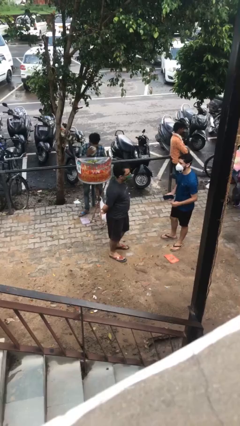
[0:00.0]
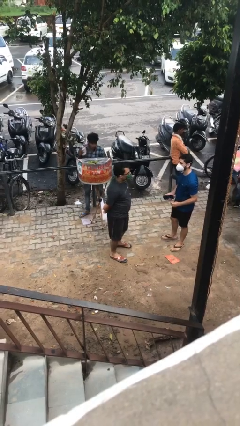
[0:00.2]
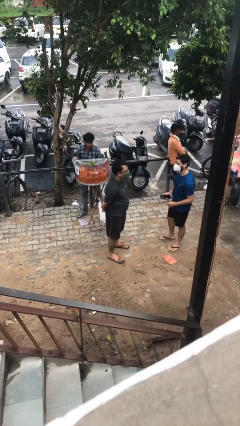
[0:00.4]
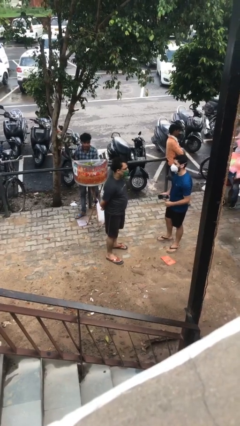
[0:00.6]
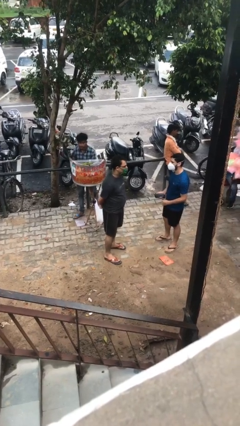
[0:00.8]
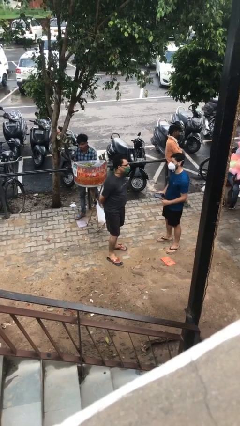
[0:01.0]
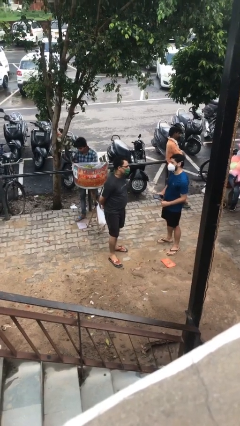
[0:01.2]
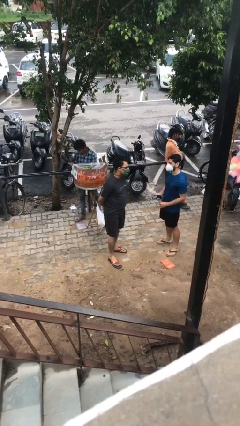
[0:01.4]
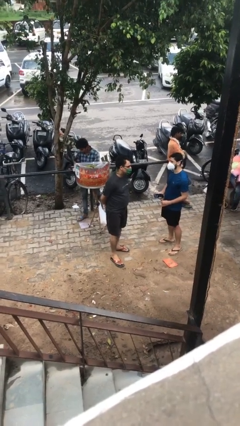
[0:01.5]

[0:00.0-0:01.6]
person talks to person

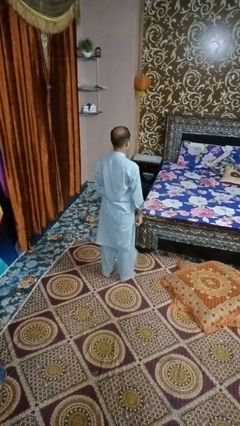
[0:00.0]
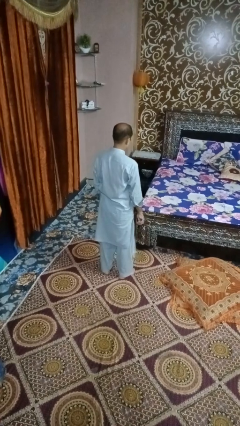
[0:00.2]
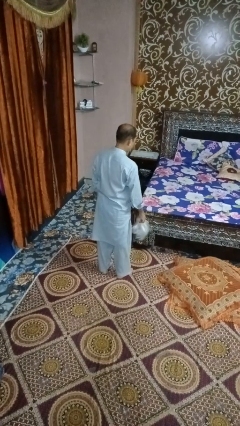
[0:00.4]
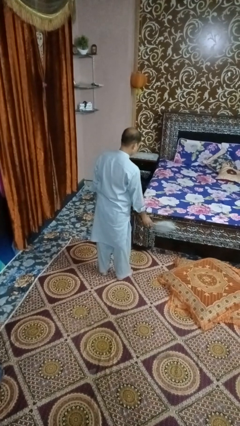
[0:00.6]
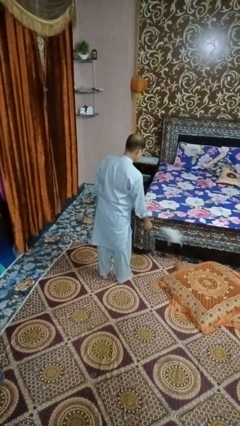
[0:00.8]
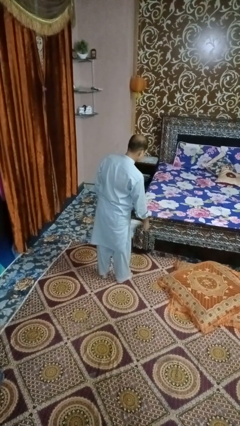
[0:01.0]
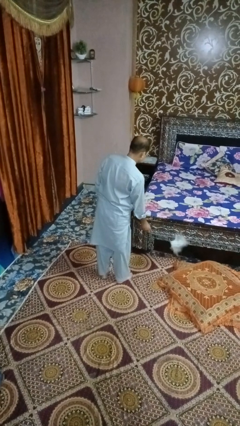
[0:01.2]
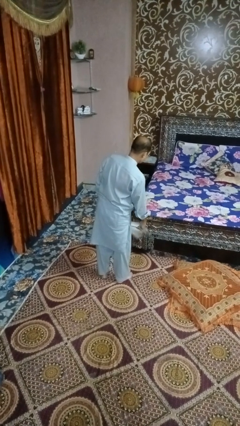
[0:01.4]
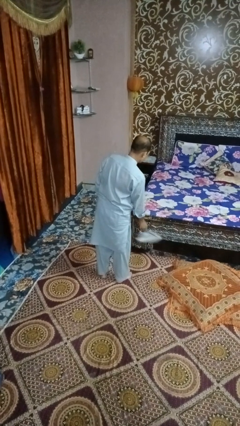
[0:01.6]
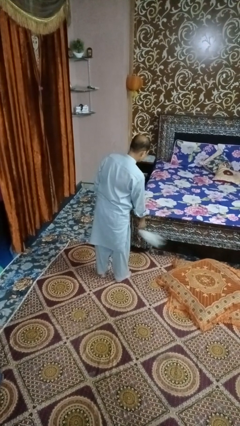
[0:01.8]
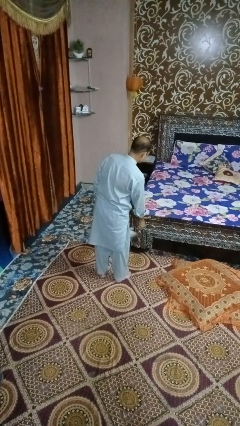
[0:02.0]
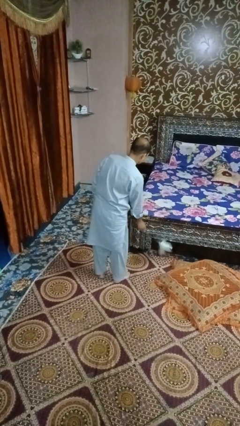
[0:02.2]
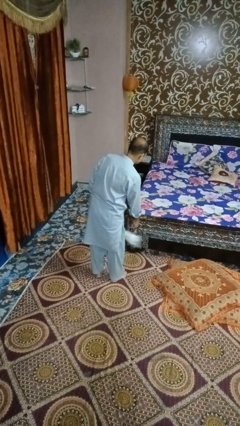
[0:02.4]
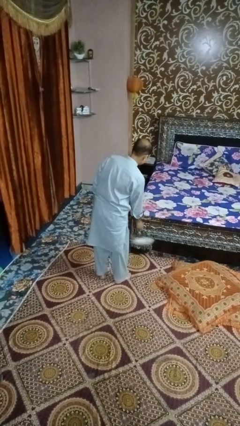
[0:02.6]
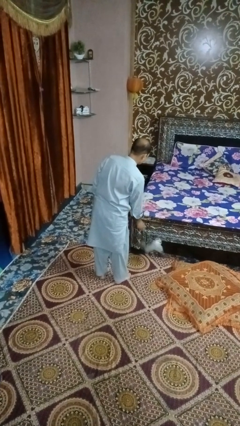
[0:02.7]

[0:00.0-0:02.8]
person dusts furniture

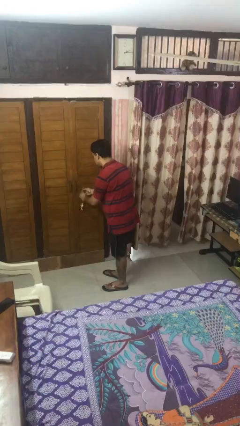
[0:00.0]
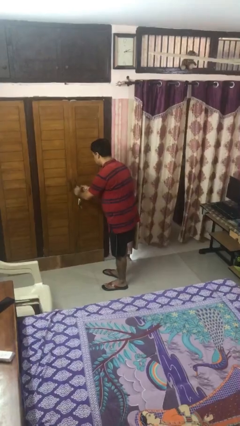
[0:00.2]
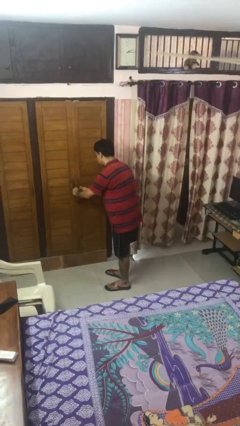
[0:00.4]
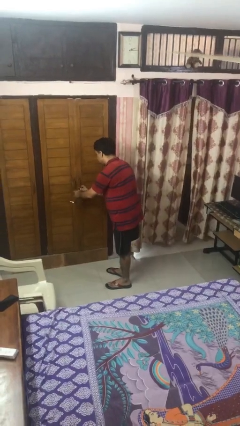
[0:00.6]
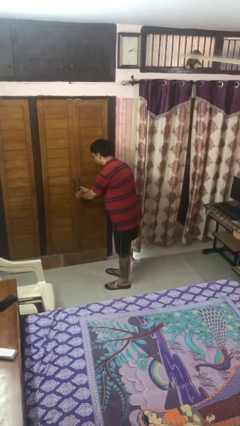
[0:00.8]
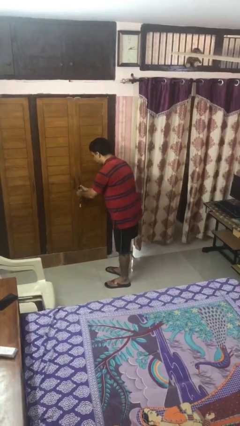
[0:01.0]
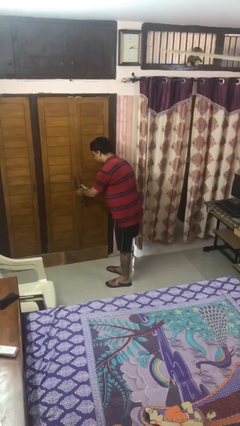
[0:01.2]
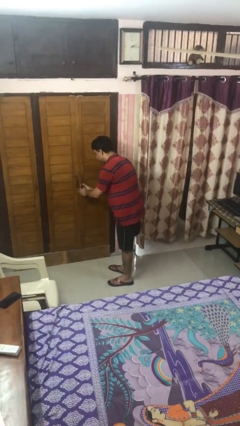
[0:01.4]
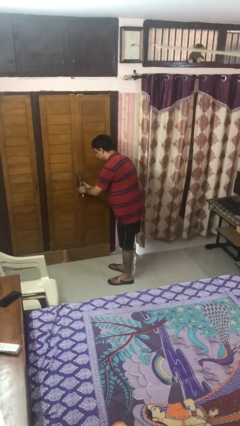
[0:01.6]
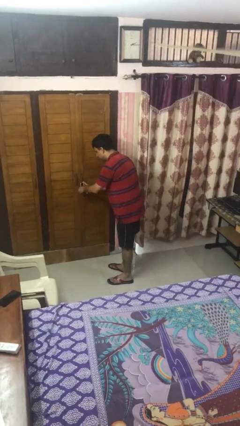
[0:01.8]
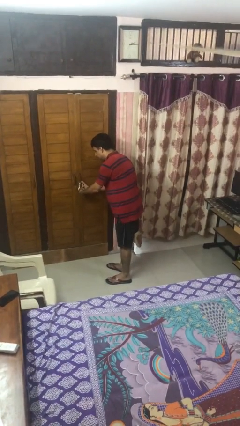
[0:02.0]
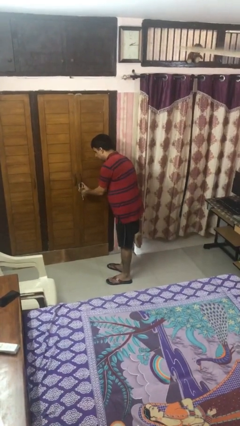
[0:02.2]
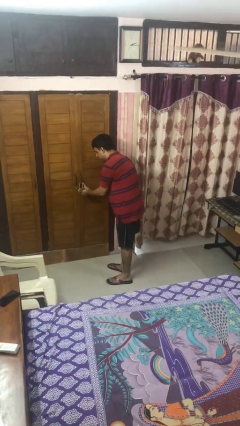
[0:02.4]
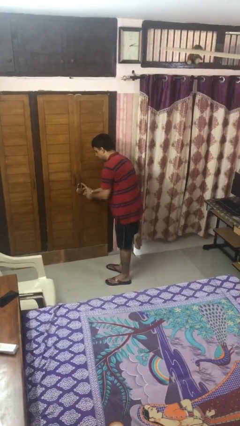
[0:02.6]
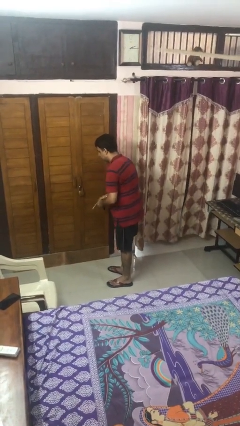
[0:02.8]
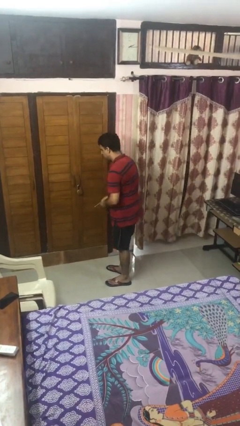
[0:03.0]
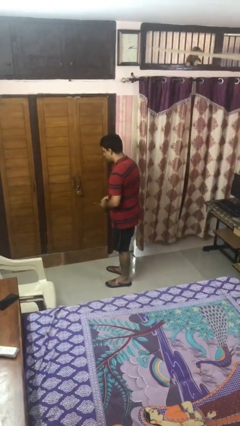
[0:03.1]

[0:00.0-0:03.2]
person locks door with keys

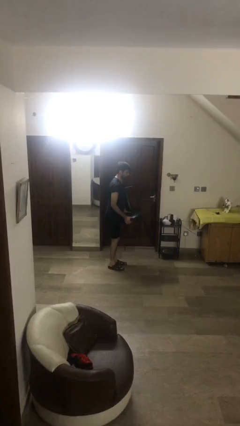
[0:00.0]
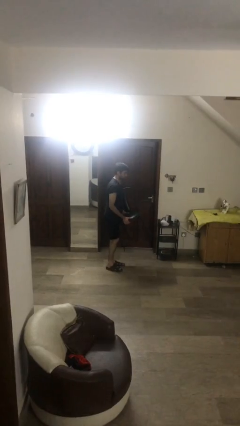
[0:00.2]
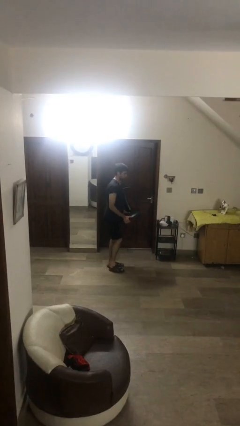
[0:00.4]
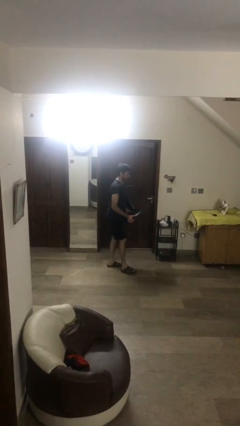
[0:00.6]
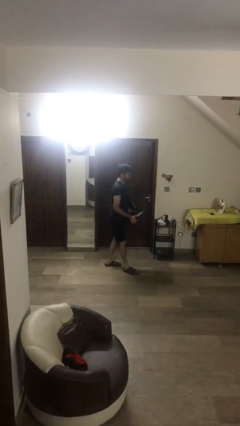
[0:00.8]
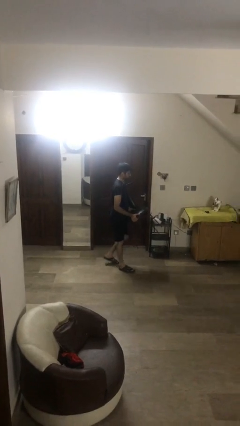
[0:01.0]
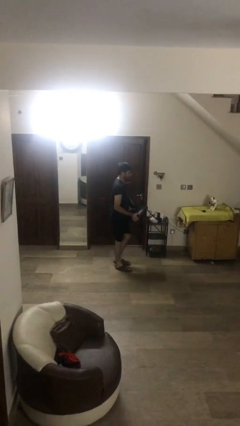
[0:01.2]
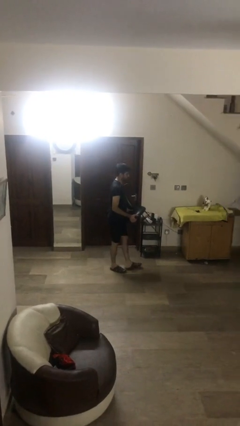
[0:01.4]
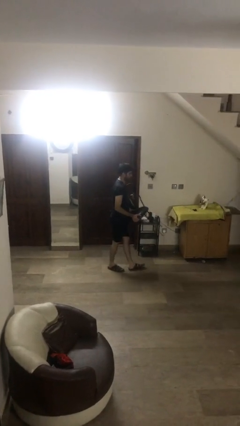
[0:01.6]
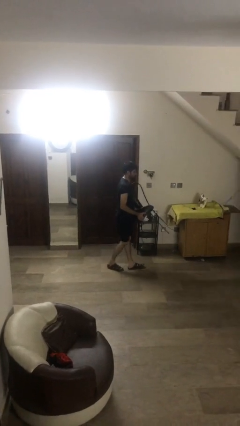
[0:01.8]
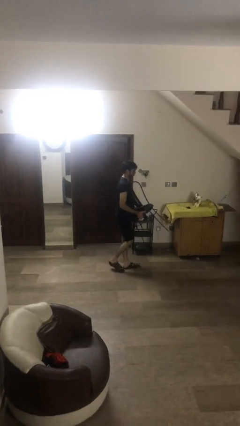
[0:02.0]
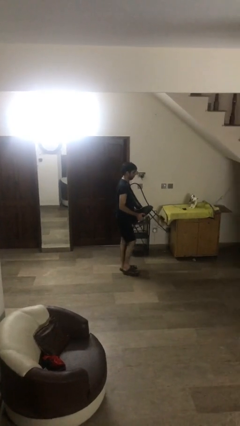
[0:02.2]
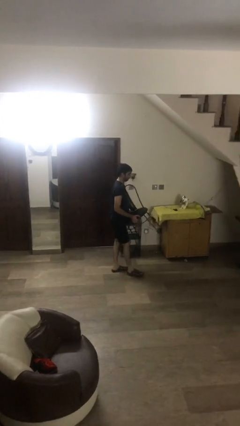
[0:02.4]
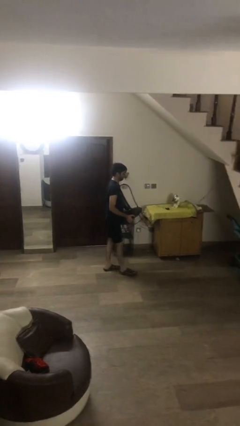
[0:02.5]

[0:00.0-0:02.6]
person carries heavy object

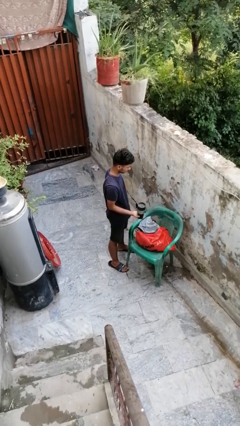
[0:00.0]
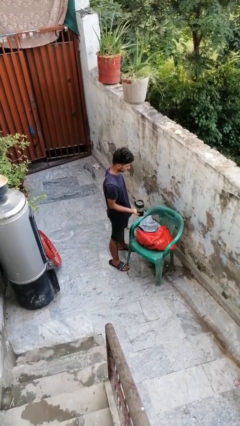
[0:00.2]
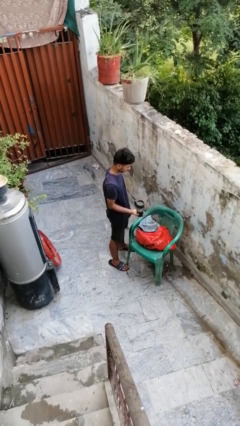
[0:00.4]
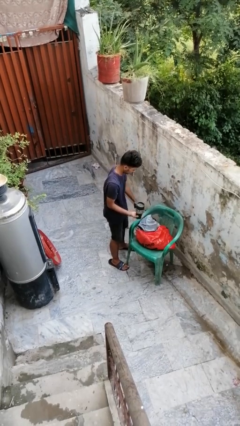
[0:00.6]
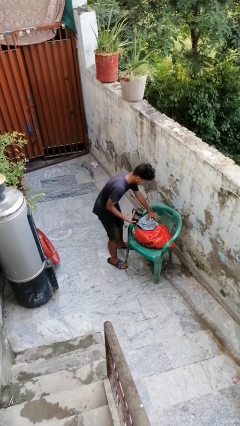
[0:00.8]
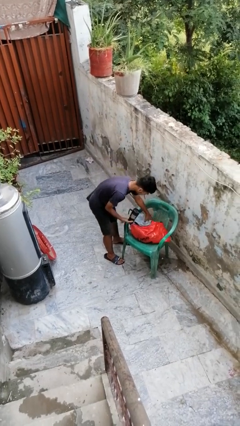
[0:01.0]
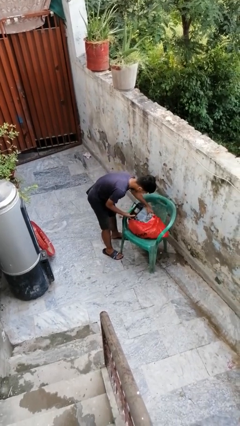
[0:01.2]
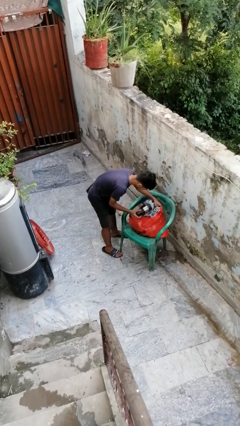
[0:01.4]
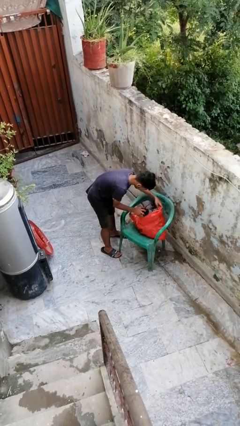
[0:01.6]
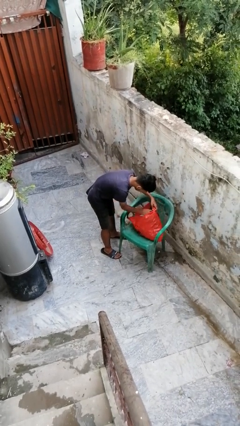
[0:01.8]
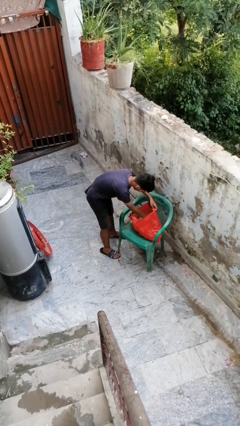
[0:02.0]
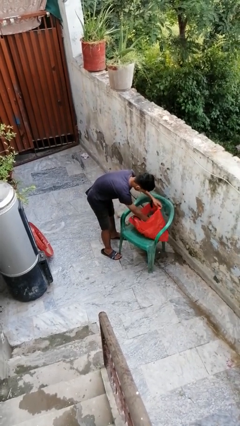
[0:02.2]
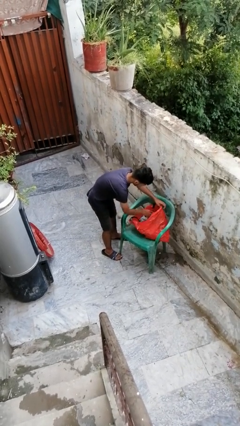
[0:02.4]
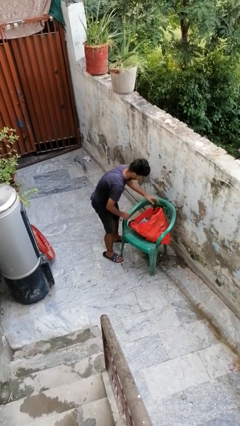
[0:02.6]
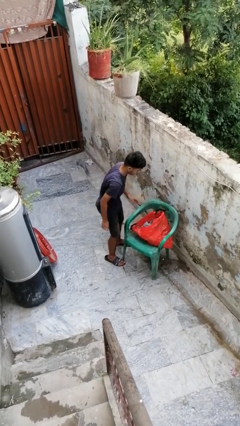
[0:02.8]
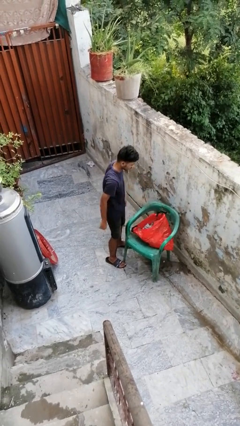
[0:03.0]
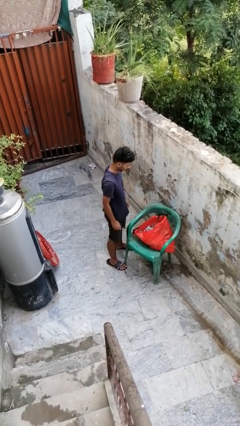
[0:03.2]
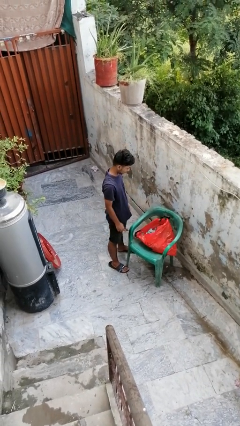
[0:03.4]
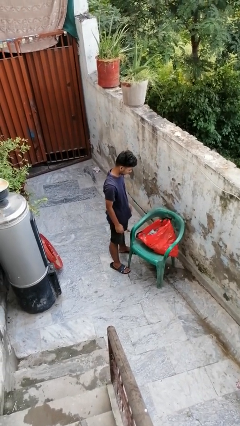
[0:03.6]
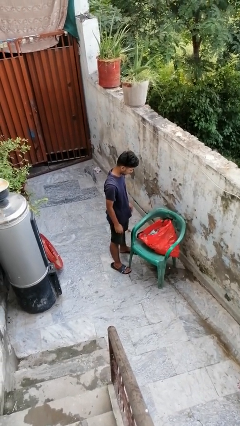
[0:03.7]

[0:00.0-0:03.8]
person puts object into bag

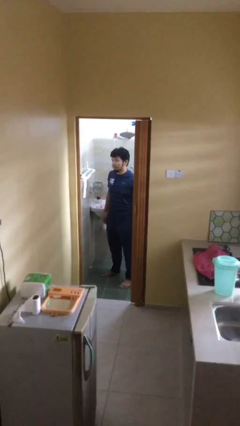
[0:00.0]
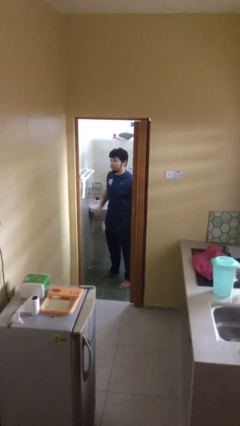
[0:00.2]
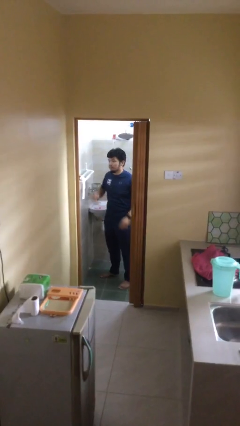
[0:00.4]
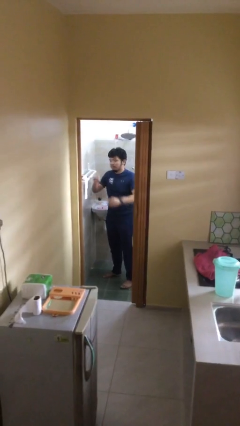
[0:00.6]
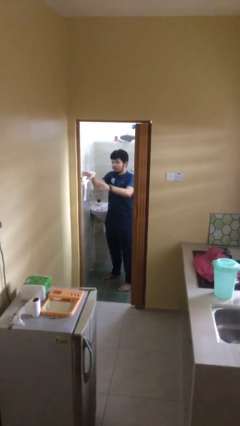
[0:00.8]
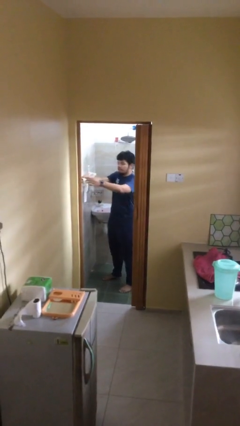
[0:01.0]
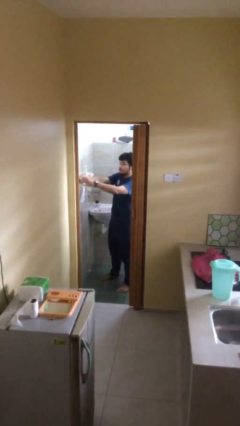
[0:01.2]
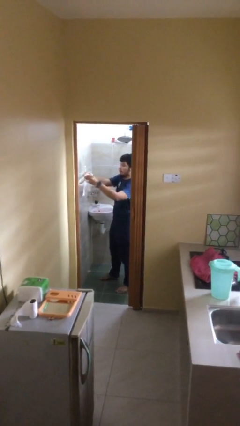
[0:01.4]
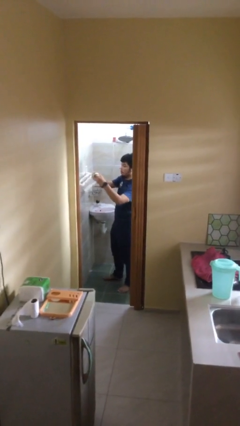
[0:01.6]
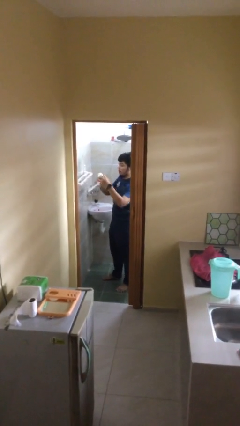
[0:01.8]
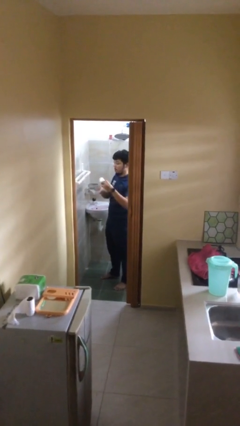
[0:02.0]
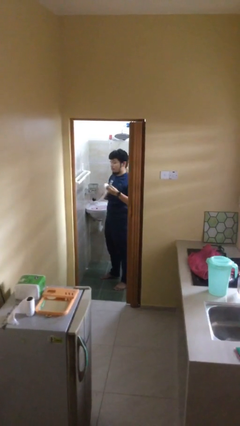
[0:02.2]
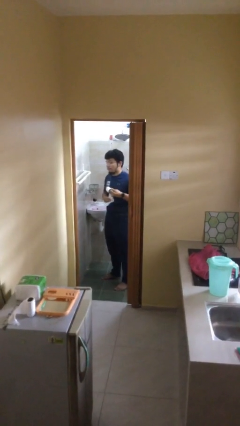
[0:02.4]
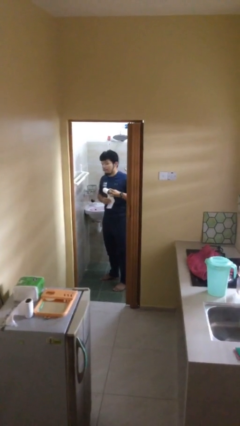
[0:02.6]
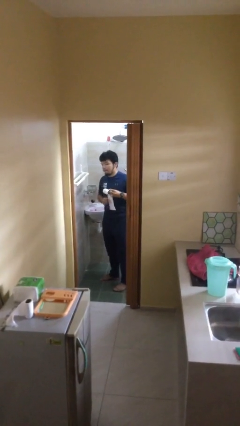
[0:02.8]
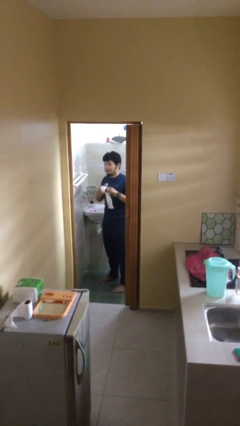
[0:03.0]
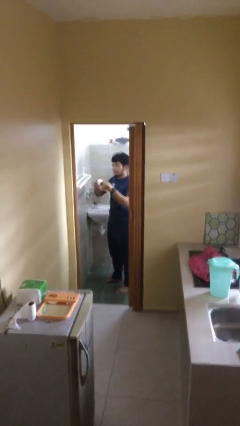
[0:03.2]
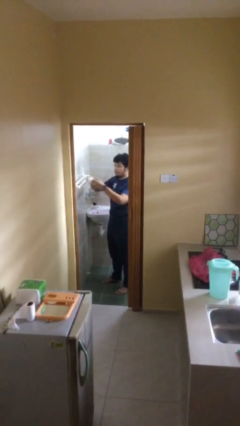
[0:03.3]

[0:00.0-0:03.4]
person picks up object from countertop
